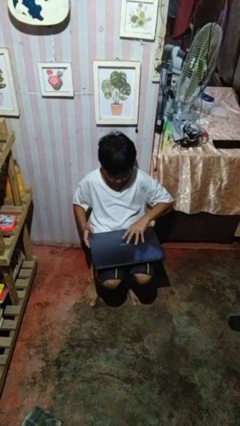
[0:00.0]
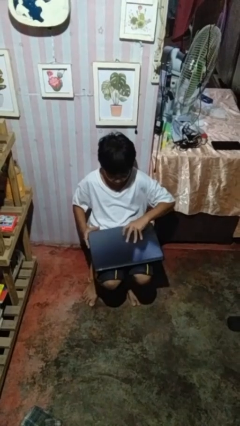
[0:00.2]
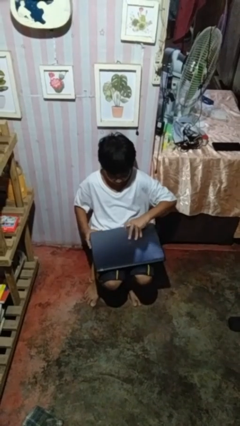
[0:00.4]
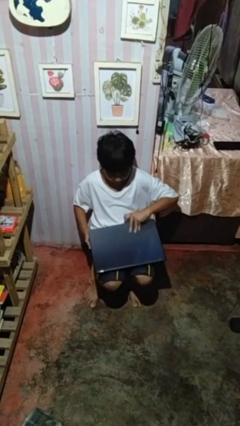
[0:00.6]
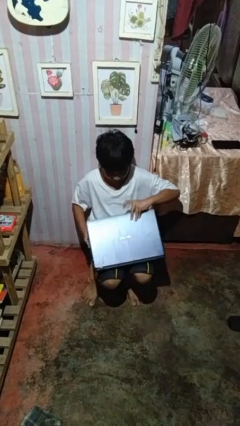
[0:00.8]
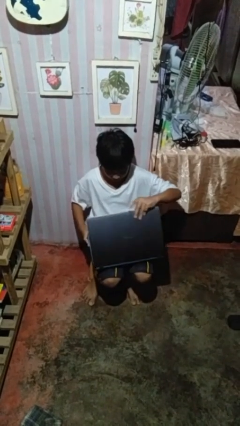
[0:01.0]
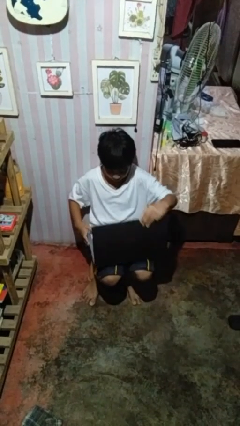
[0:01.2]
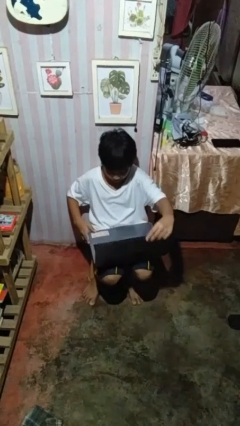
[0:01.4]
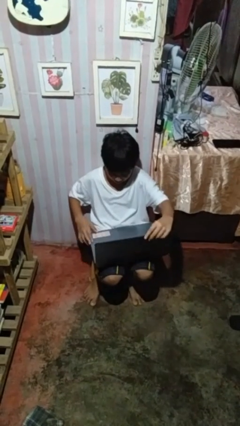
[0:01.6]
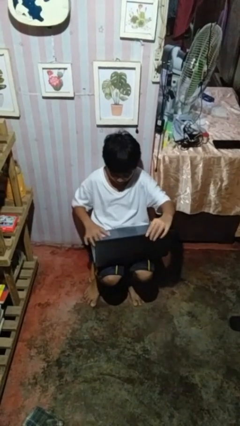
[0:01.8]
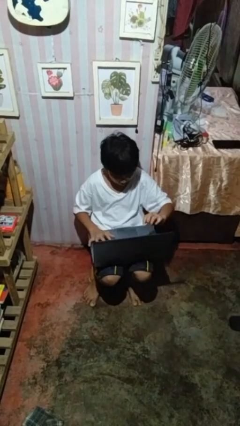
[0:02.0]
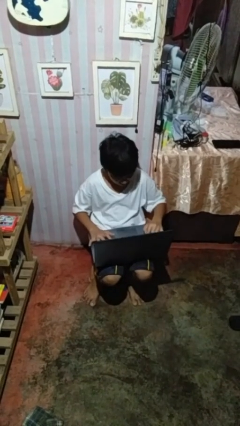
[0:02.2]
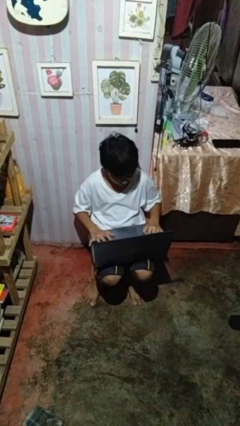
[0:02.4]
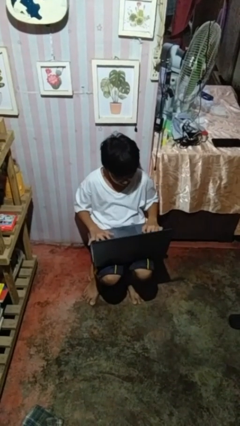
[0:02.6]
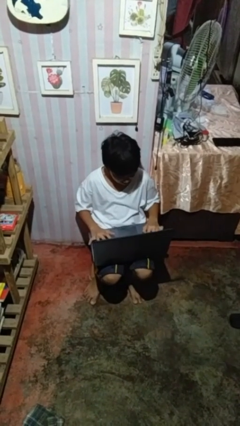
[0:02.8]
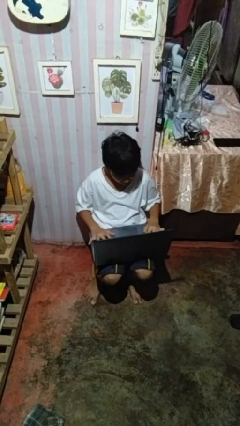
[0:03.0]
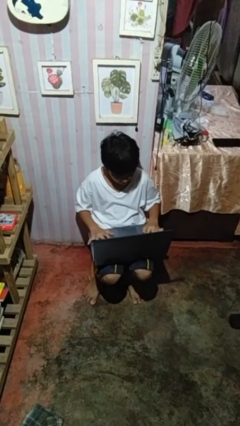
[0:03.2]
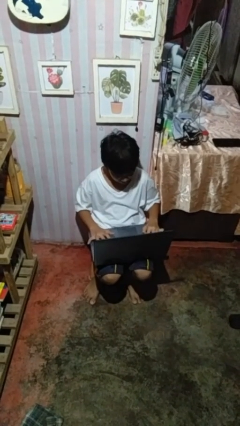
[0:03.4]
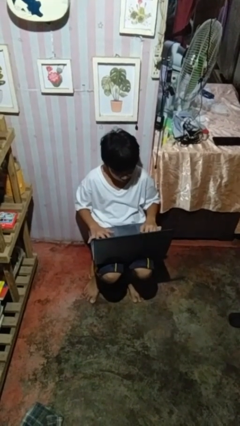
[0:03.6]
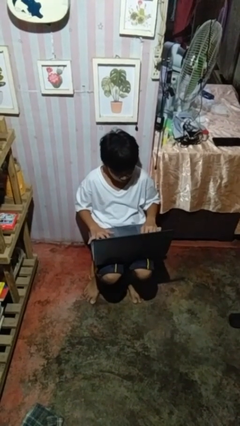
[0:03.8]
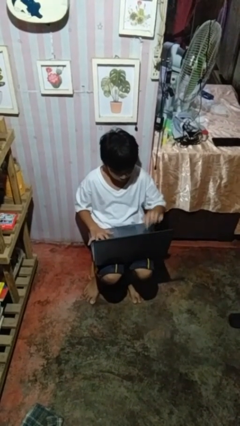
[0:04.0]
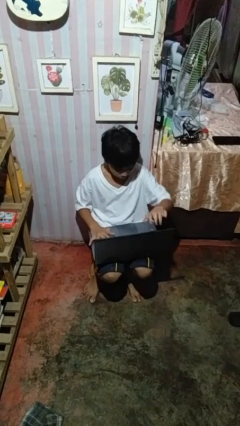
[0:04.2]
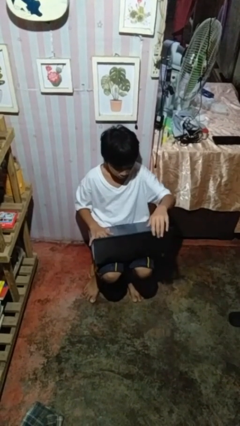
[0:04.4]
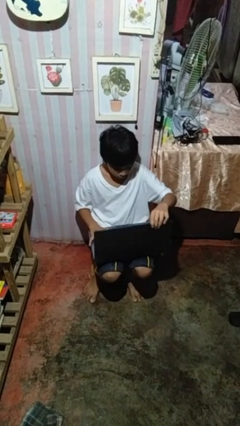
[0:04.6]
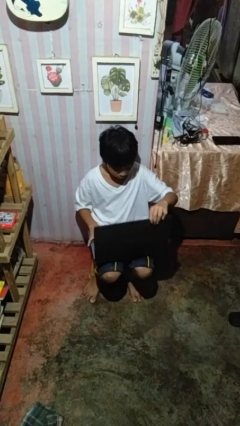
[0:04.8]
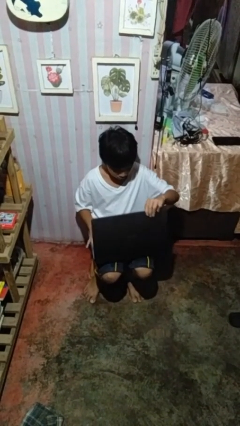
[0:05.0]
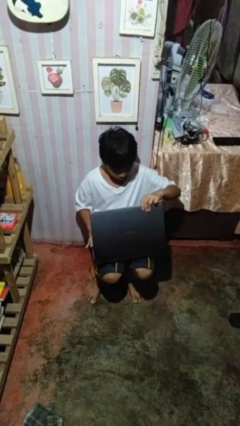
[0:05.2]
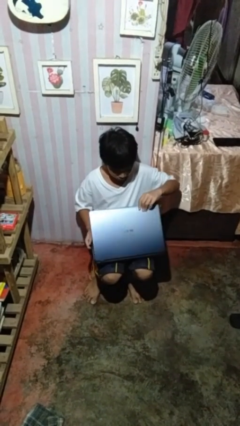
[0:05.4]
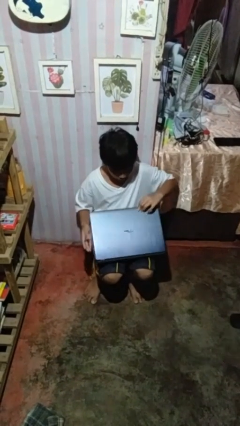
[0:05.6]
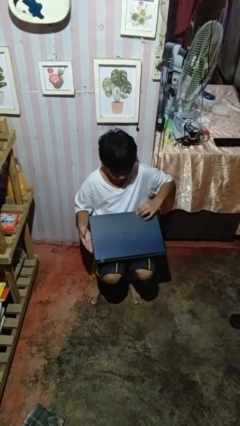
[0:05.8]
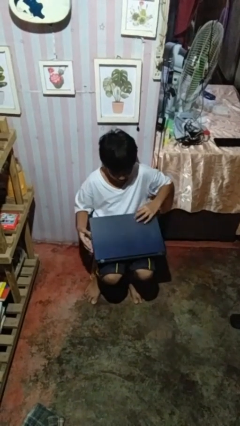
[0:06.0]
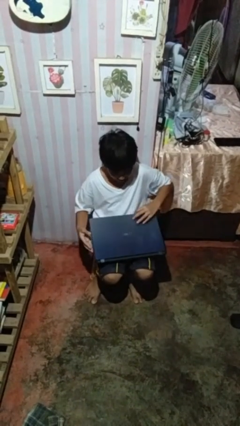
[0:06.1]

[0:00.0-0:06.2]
person interacts with laptop

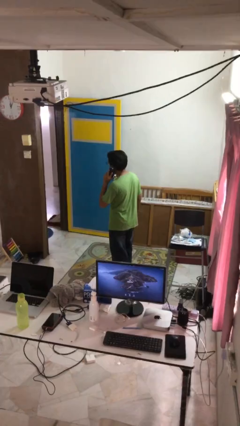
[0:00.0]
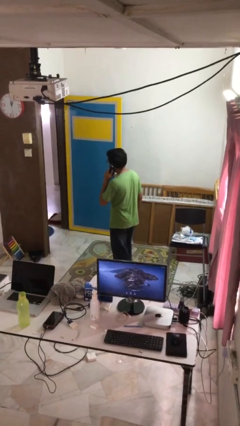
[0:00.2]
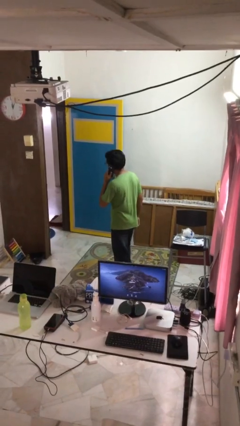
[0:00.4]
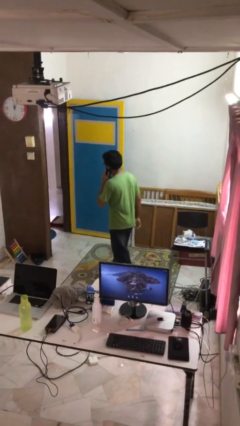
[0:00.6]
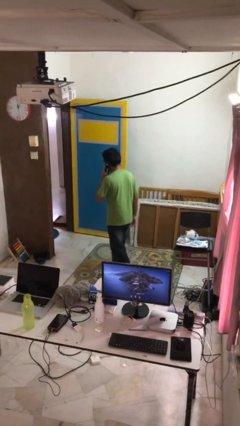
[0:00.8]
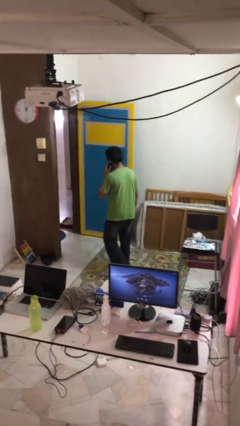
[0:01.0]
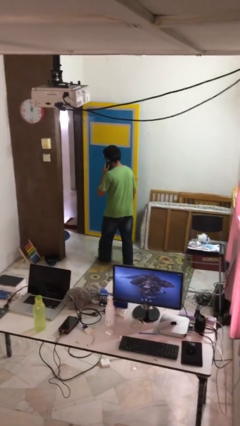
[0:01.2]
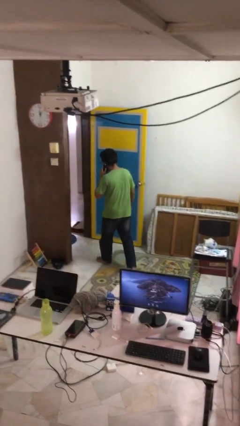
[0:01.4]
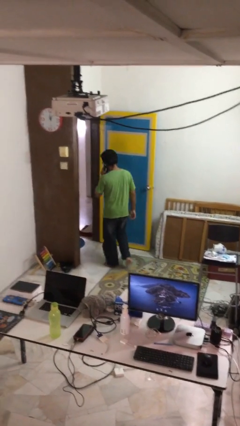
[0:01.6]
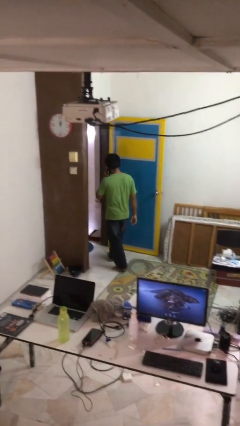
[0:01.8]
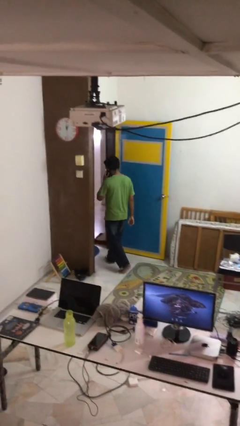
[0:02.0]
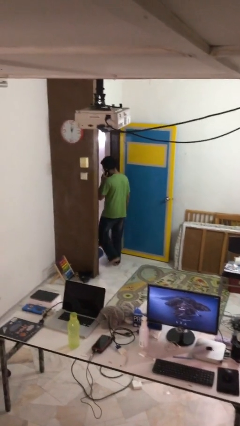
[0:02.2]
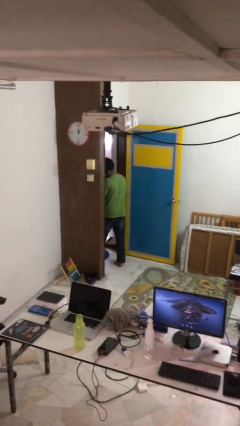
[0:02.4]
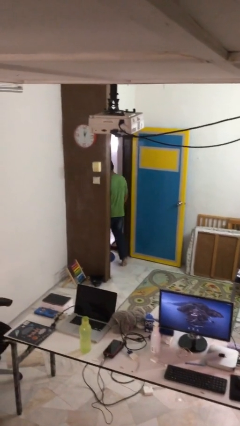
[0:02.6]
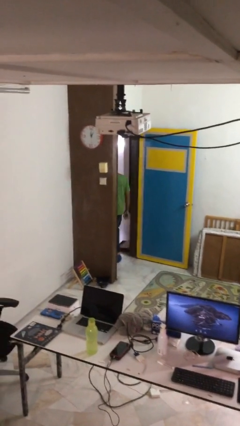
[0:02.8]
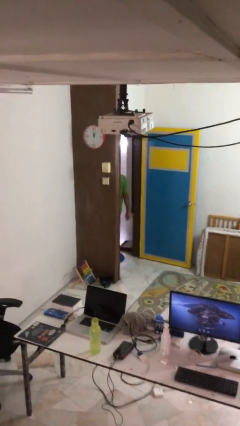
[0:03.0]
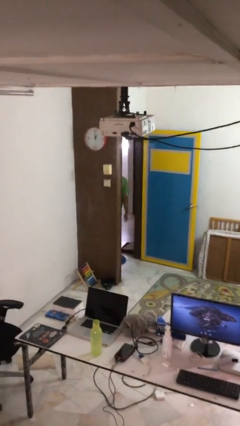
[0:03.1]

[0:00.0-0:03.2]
person exits scene through structure

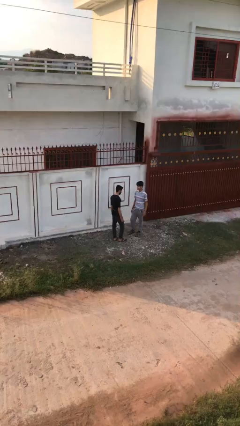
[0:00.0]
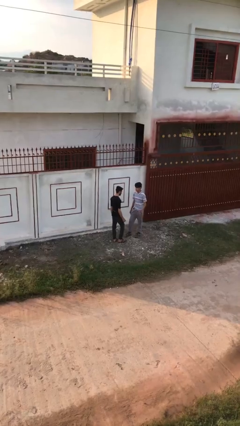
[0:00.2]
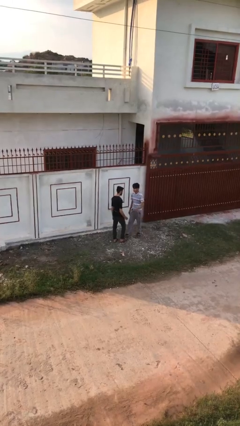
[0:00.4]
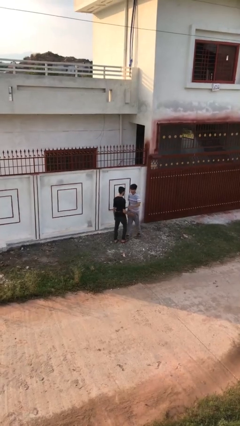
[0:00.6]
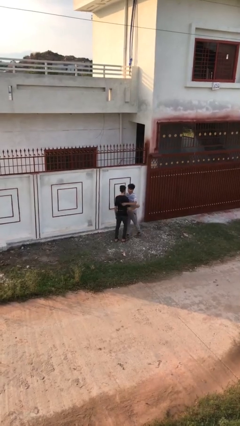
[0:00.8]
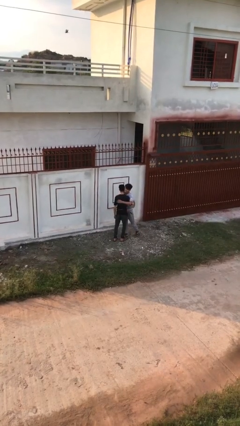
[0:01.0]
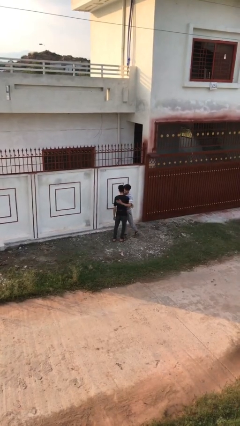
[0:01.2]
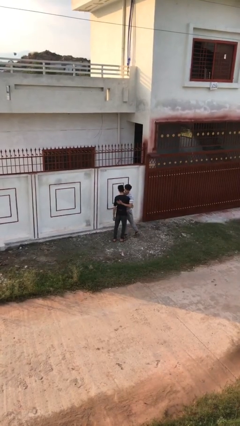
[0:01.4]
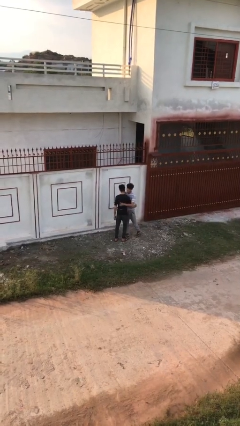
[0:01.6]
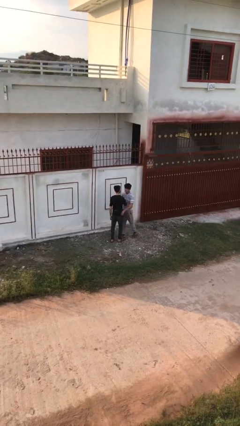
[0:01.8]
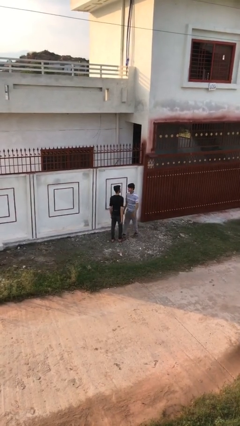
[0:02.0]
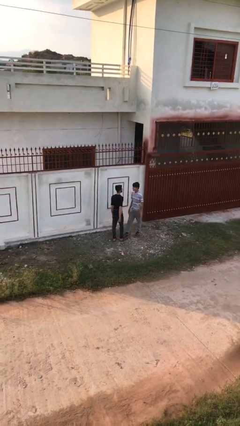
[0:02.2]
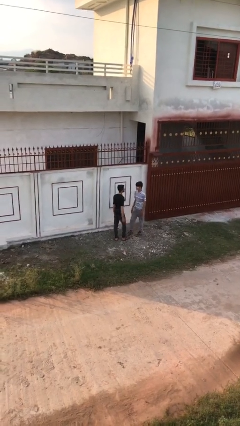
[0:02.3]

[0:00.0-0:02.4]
person embraces person

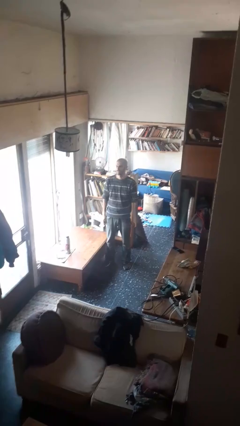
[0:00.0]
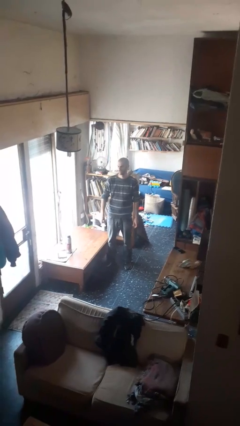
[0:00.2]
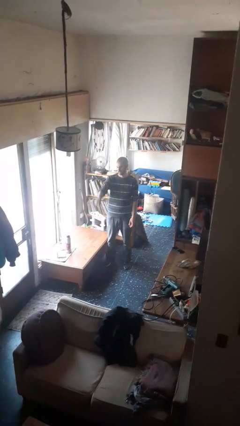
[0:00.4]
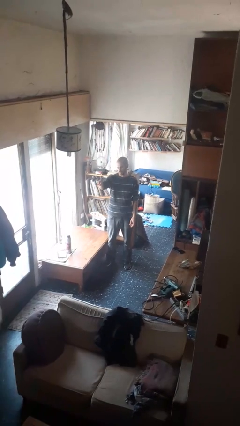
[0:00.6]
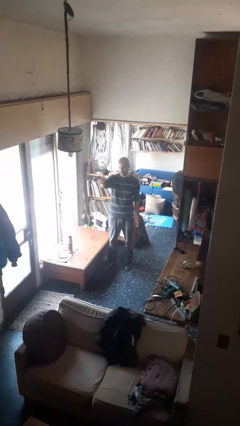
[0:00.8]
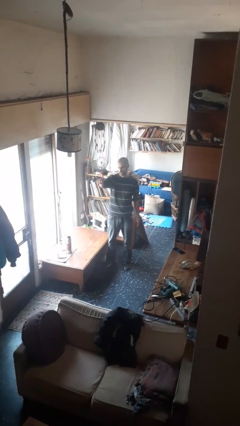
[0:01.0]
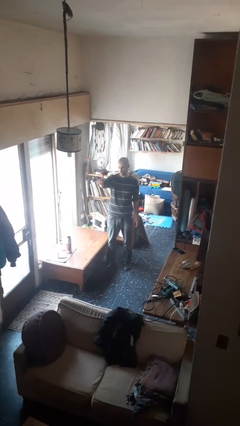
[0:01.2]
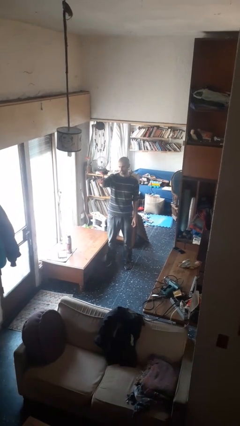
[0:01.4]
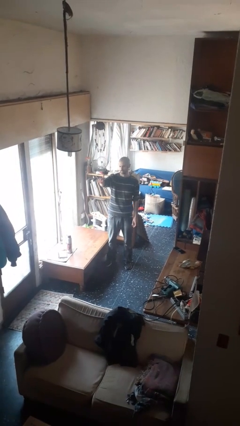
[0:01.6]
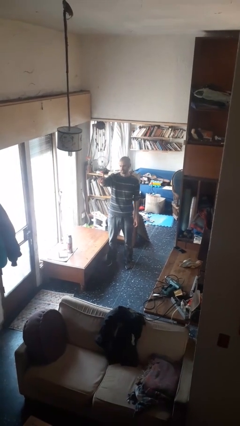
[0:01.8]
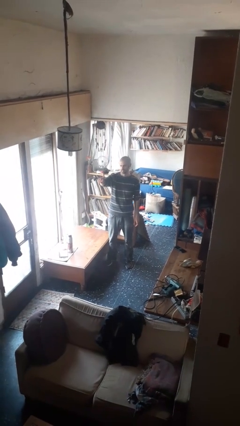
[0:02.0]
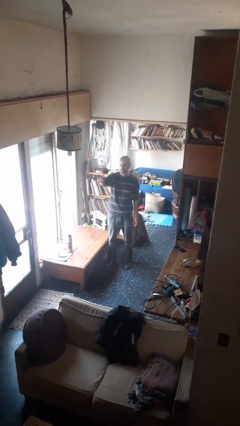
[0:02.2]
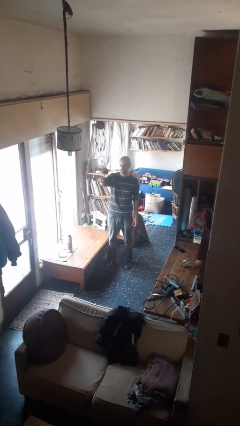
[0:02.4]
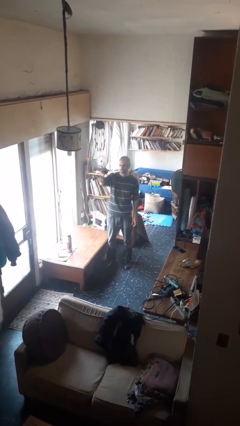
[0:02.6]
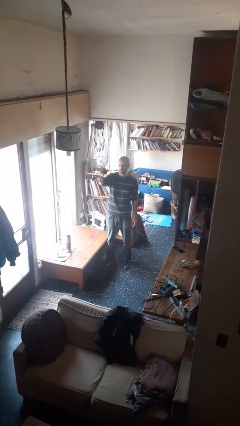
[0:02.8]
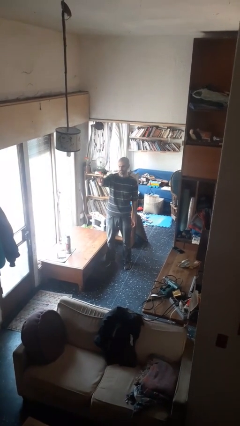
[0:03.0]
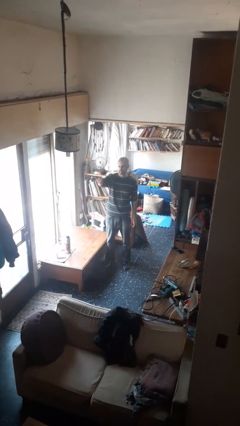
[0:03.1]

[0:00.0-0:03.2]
person gestures number one

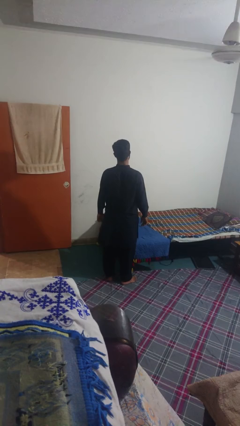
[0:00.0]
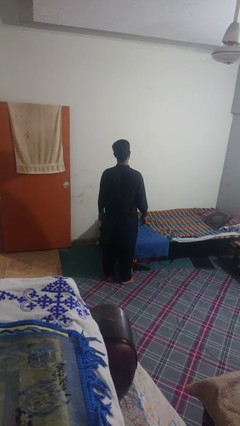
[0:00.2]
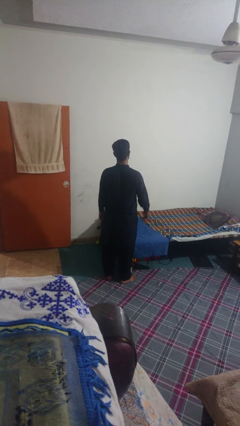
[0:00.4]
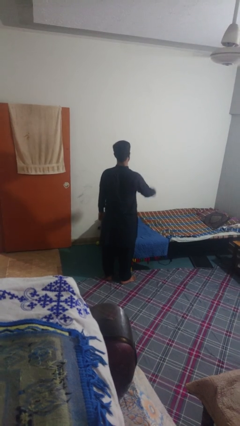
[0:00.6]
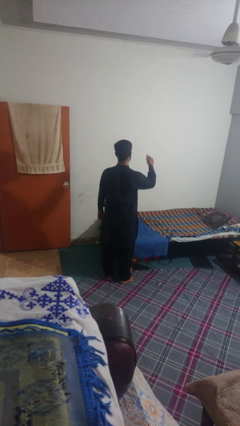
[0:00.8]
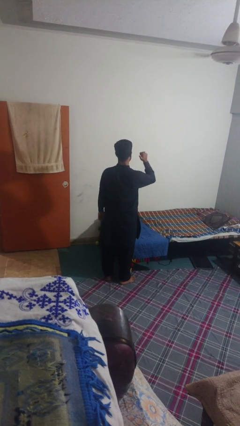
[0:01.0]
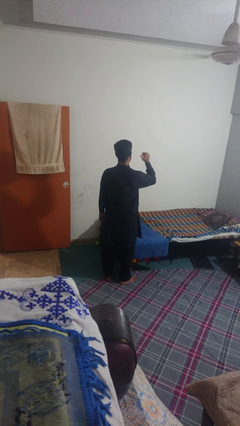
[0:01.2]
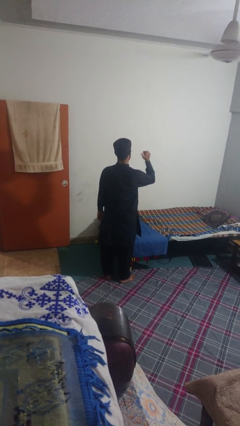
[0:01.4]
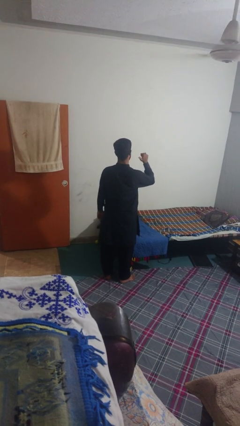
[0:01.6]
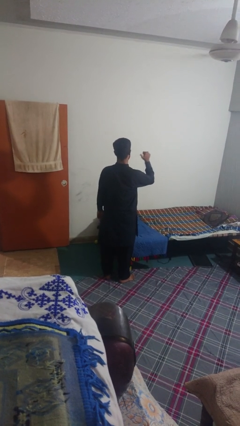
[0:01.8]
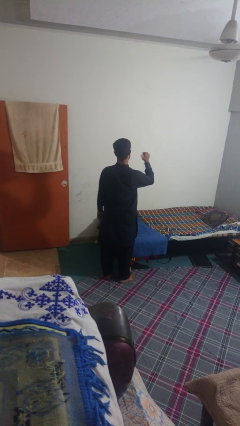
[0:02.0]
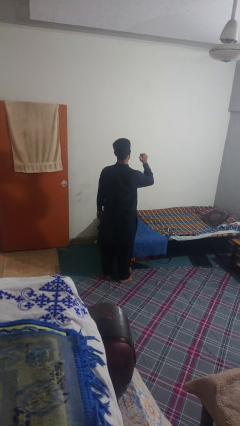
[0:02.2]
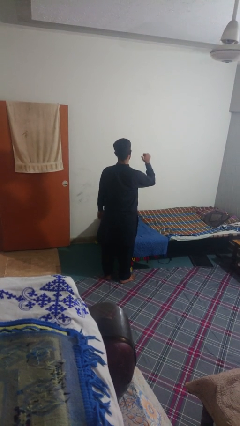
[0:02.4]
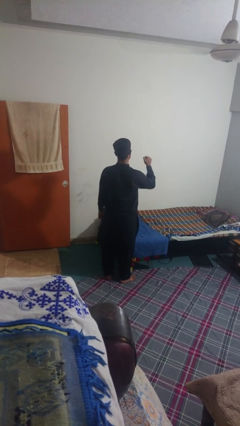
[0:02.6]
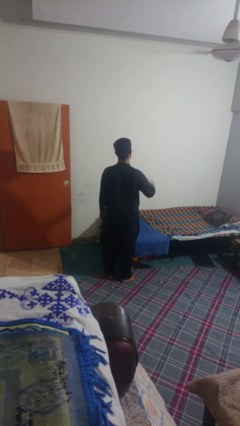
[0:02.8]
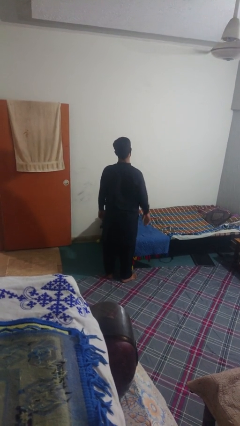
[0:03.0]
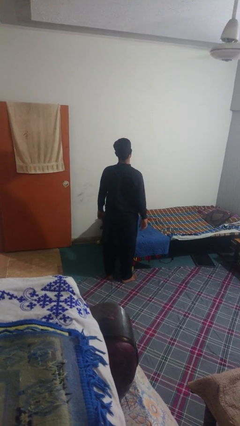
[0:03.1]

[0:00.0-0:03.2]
person gestures behind me
